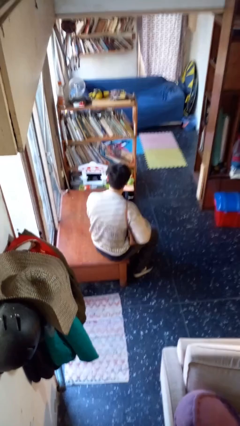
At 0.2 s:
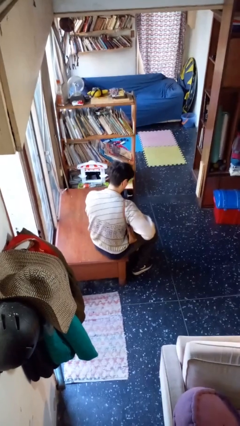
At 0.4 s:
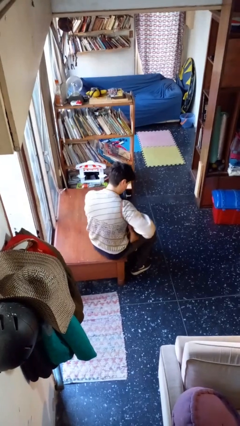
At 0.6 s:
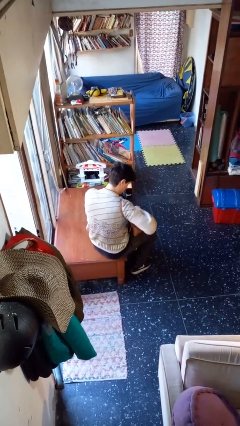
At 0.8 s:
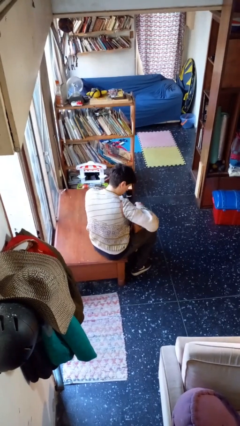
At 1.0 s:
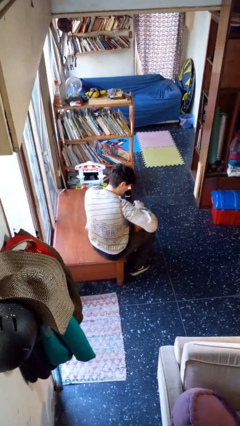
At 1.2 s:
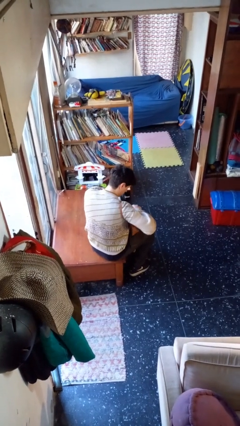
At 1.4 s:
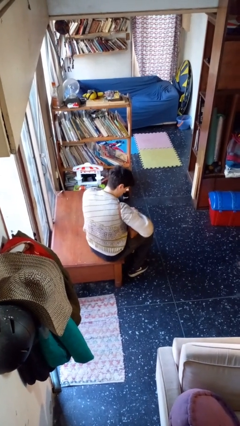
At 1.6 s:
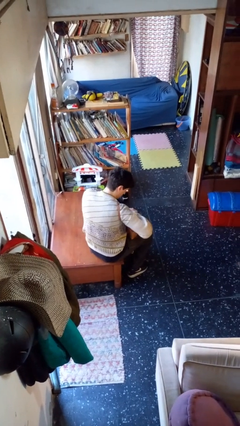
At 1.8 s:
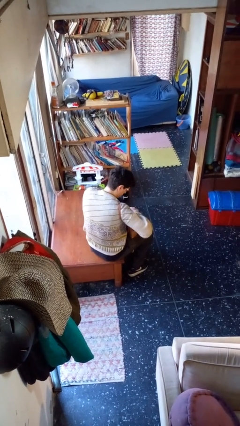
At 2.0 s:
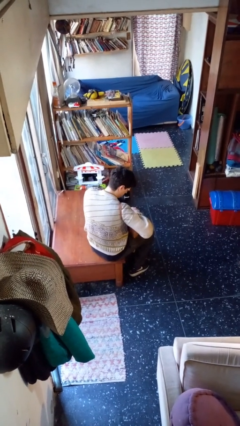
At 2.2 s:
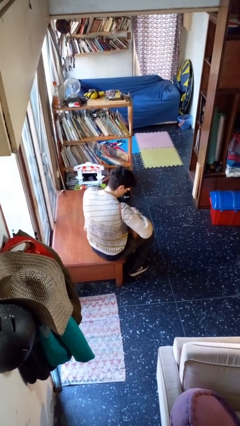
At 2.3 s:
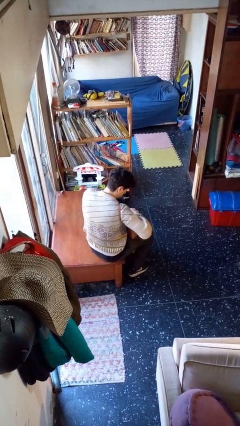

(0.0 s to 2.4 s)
person searches in purse

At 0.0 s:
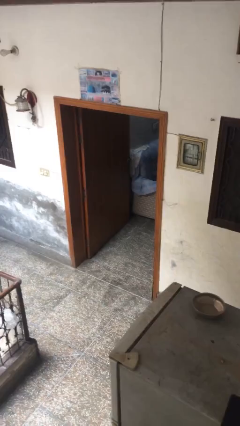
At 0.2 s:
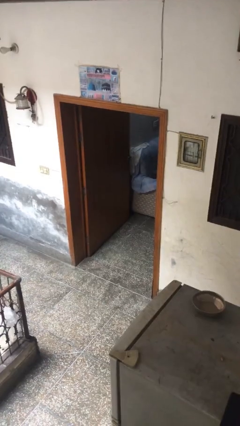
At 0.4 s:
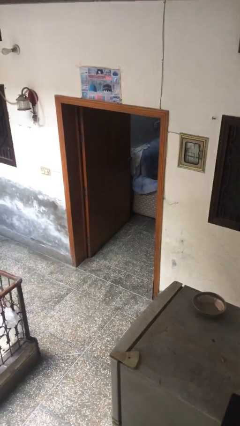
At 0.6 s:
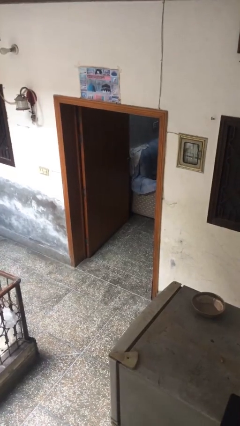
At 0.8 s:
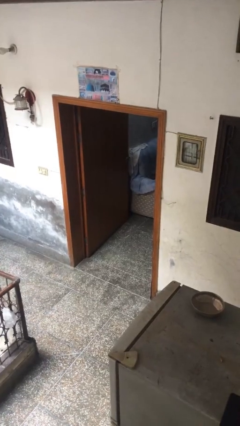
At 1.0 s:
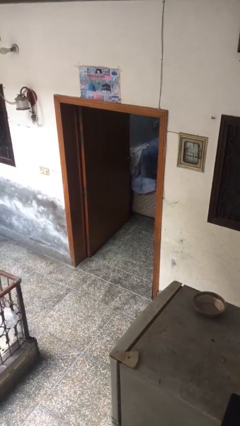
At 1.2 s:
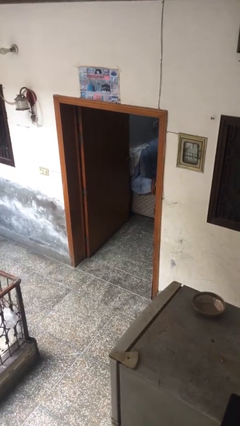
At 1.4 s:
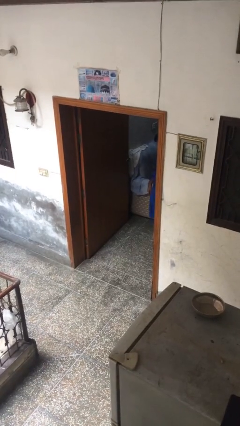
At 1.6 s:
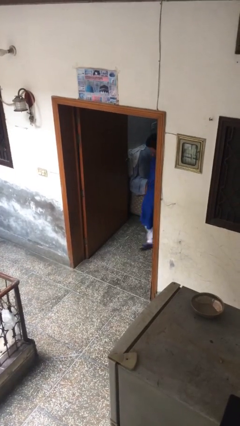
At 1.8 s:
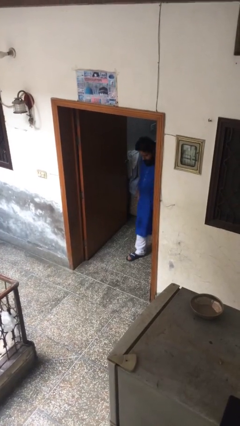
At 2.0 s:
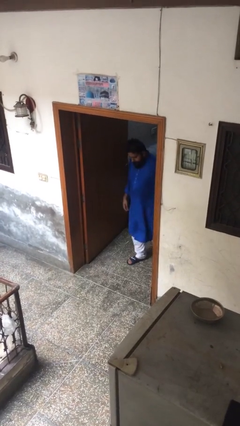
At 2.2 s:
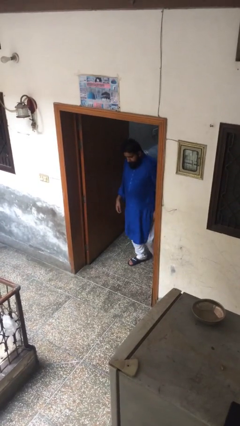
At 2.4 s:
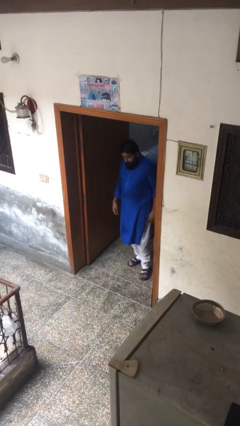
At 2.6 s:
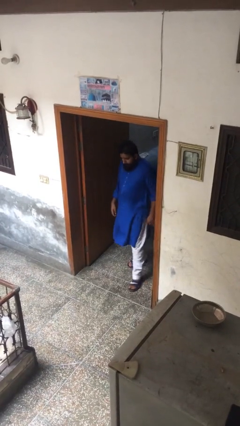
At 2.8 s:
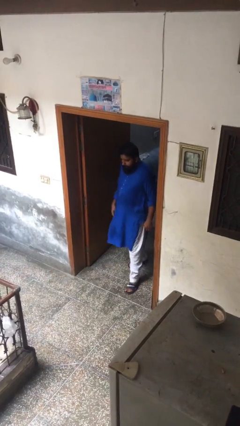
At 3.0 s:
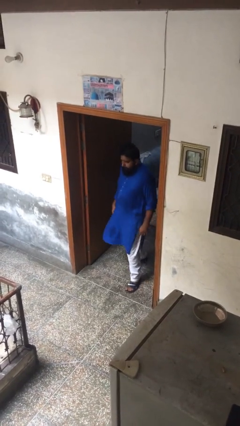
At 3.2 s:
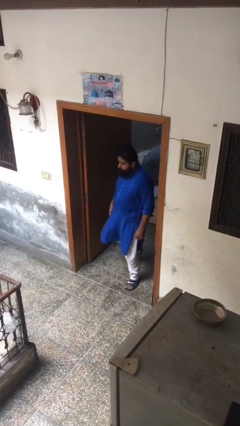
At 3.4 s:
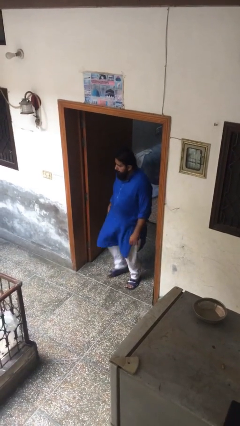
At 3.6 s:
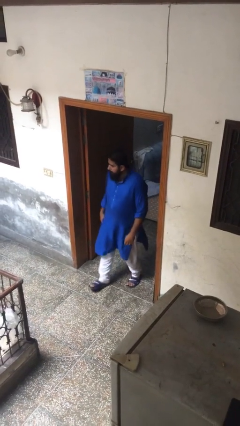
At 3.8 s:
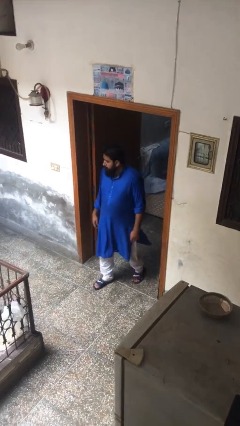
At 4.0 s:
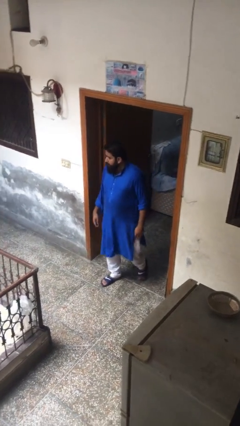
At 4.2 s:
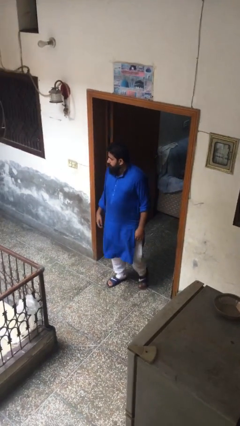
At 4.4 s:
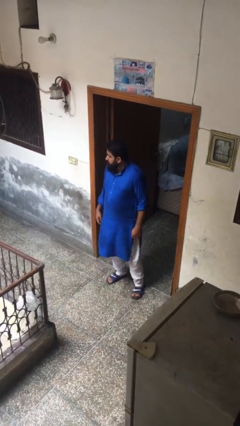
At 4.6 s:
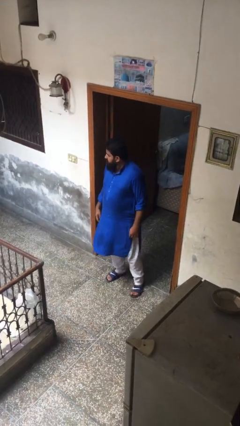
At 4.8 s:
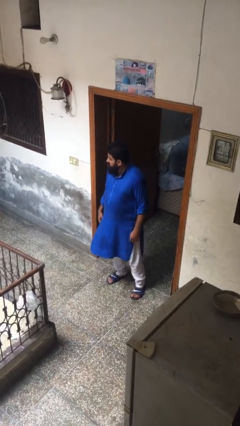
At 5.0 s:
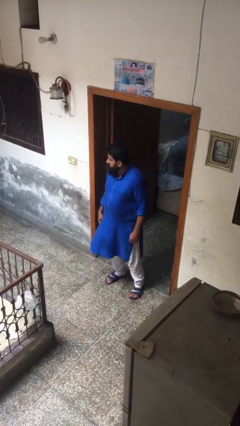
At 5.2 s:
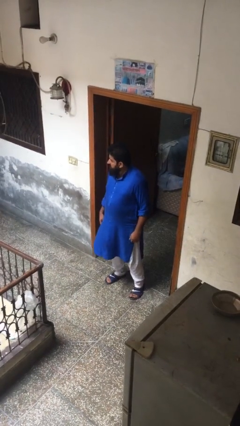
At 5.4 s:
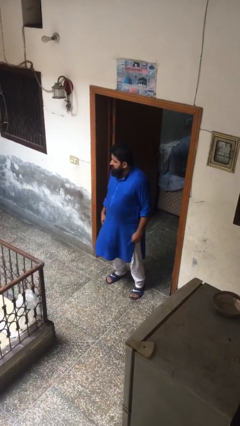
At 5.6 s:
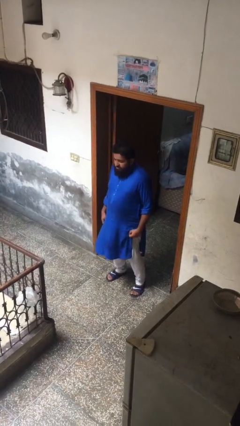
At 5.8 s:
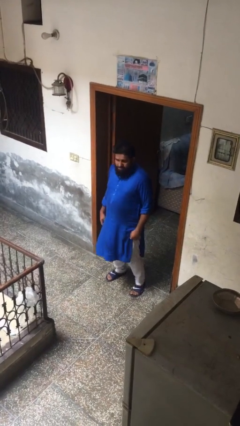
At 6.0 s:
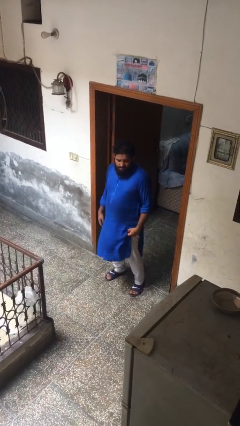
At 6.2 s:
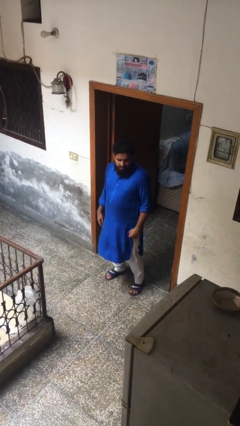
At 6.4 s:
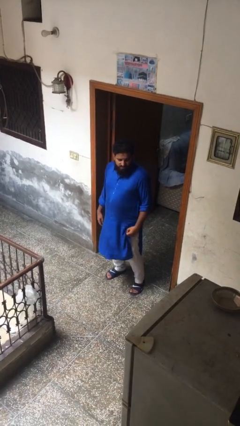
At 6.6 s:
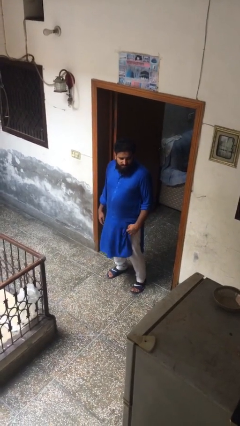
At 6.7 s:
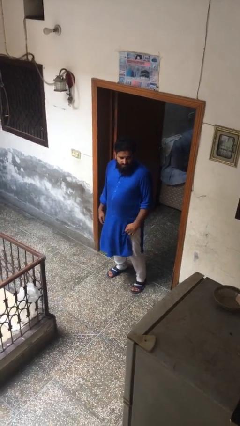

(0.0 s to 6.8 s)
person enters scene through structure

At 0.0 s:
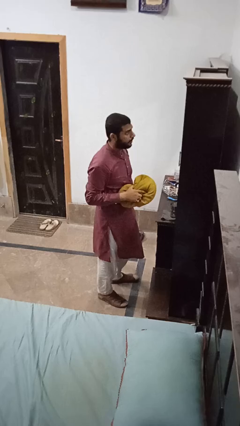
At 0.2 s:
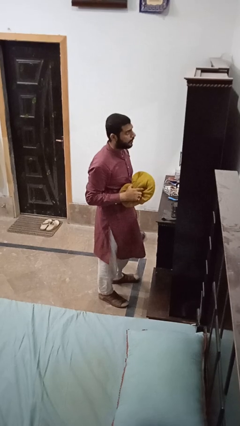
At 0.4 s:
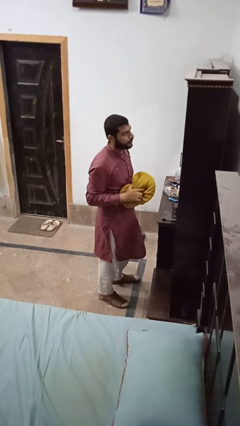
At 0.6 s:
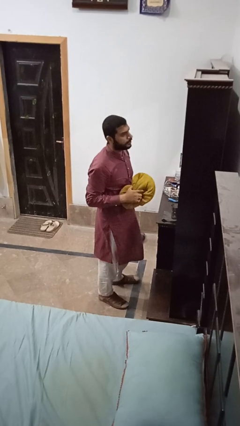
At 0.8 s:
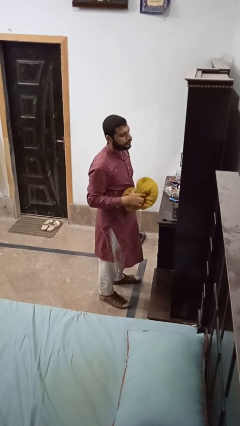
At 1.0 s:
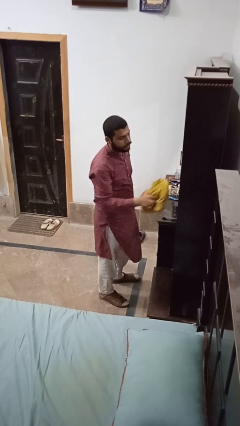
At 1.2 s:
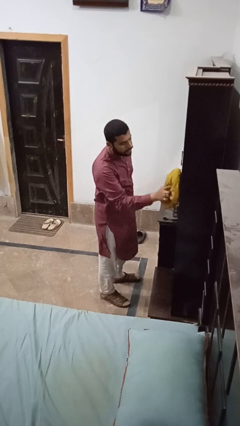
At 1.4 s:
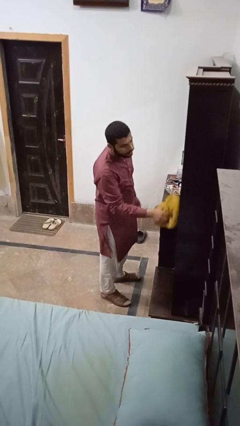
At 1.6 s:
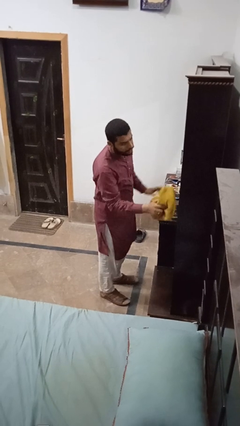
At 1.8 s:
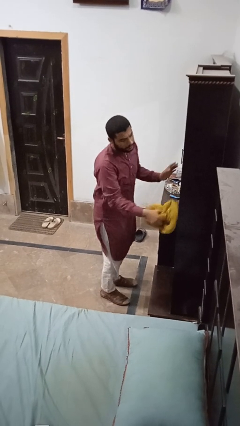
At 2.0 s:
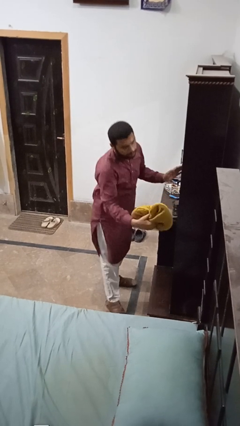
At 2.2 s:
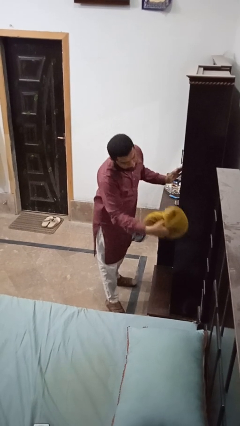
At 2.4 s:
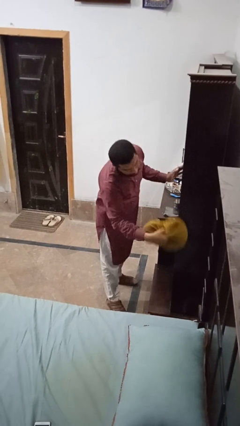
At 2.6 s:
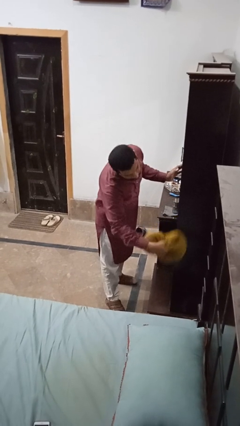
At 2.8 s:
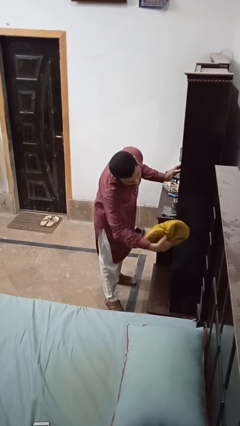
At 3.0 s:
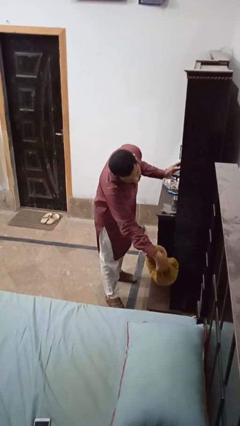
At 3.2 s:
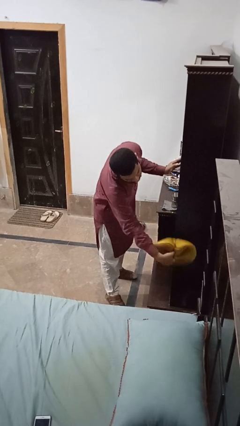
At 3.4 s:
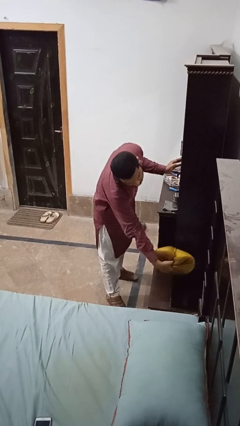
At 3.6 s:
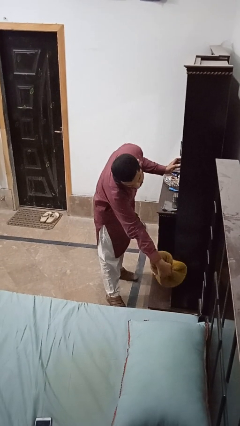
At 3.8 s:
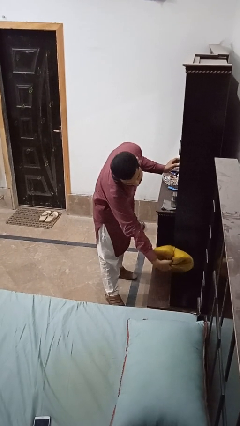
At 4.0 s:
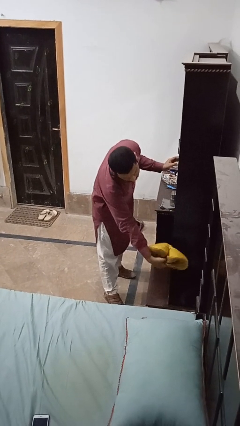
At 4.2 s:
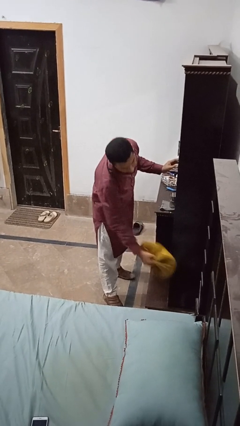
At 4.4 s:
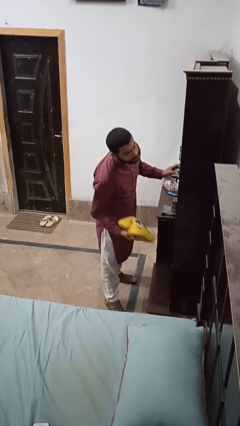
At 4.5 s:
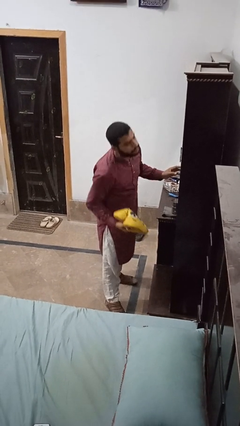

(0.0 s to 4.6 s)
person dusts furniture

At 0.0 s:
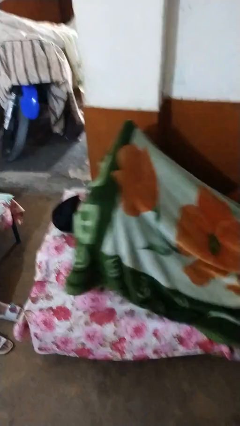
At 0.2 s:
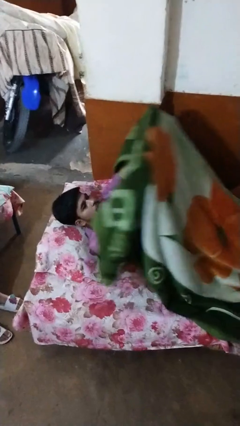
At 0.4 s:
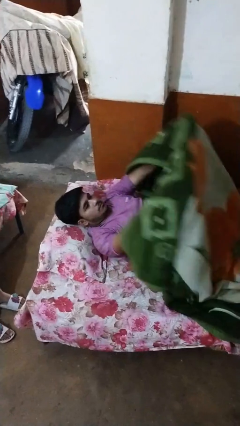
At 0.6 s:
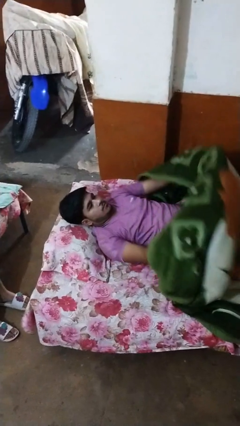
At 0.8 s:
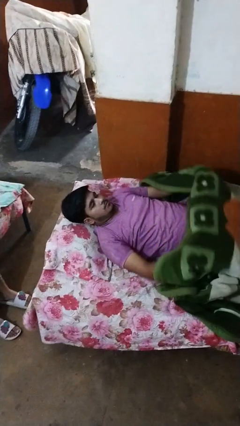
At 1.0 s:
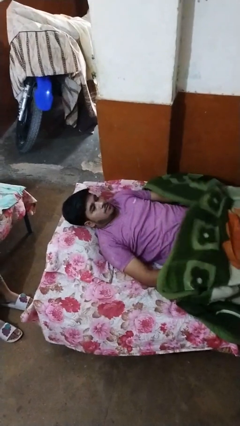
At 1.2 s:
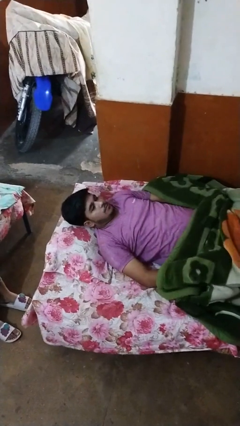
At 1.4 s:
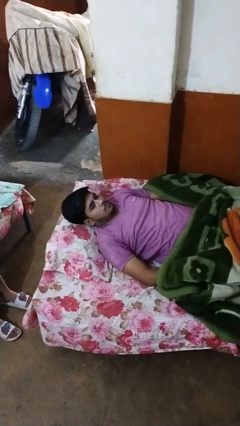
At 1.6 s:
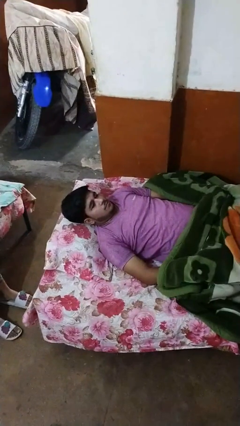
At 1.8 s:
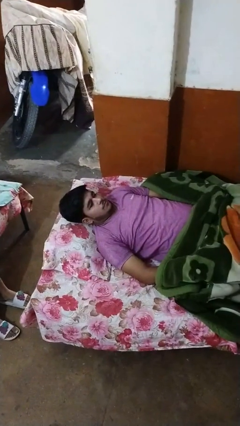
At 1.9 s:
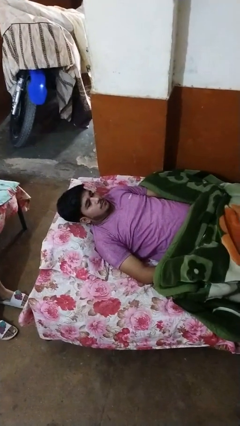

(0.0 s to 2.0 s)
person uncovers with blanket

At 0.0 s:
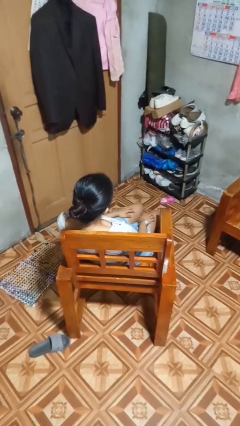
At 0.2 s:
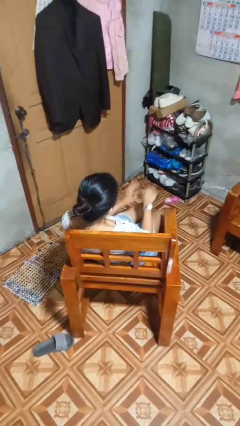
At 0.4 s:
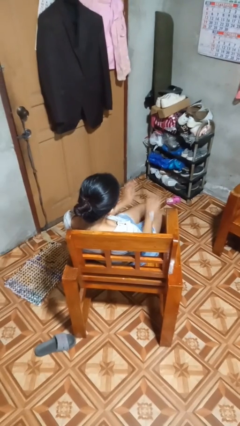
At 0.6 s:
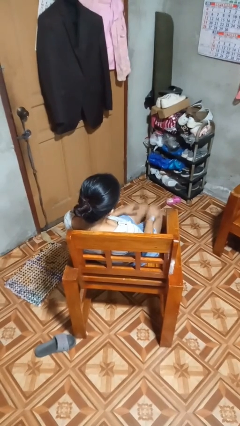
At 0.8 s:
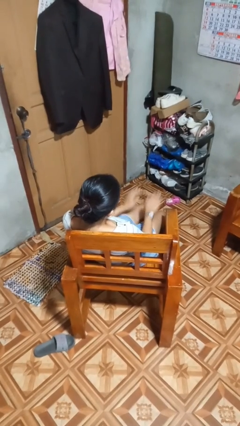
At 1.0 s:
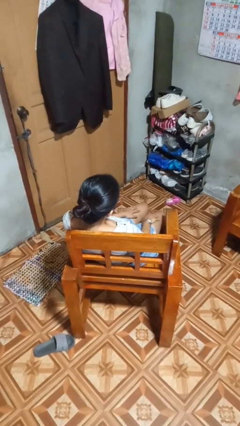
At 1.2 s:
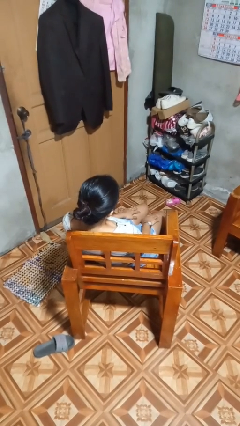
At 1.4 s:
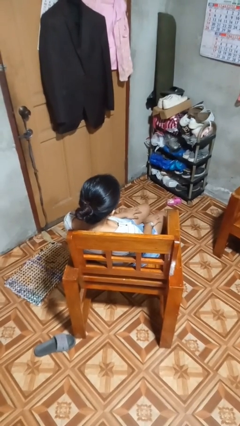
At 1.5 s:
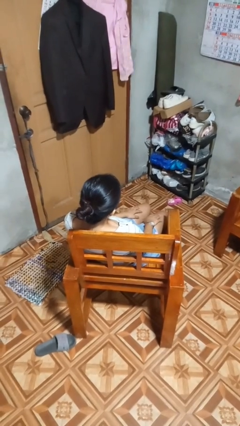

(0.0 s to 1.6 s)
person slaps hands on thighs

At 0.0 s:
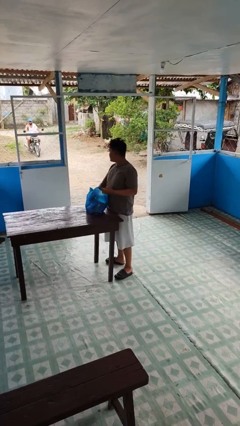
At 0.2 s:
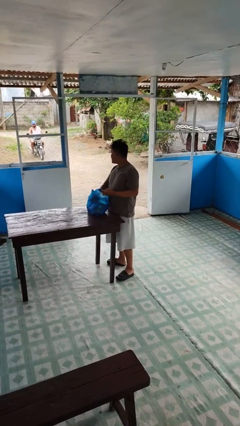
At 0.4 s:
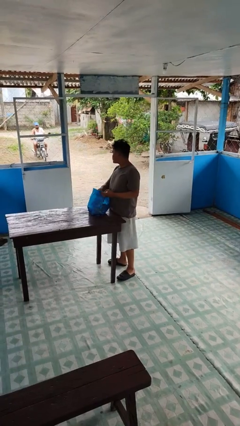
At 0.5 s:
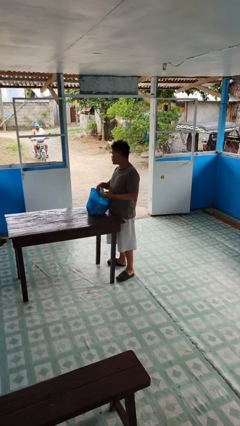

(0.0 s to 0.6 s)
person takes object from bag
